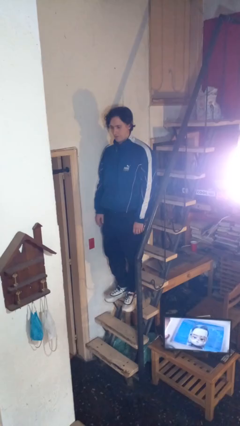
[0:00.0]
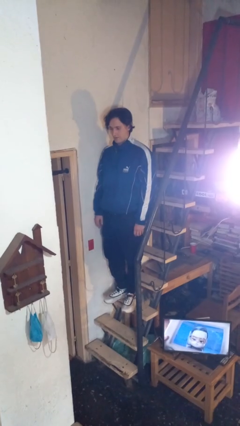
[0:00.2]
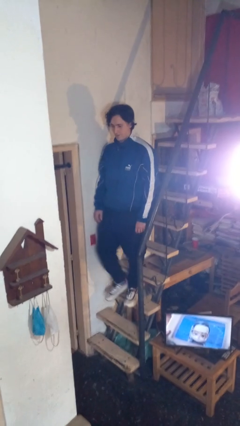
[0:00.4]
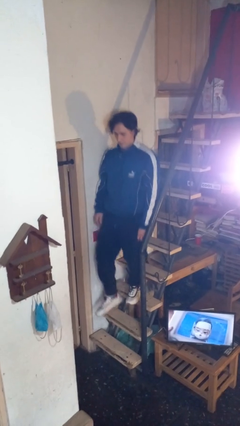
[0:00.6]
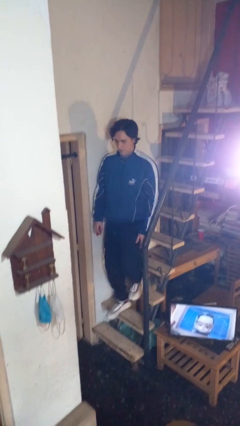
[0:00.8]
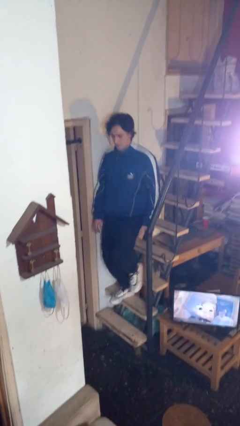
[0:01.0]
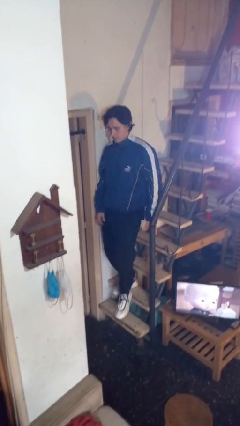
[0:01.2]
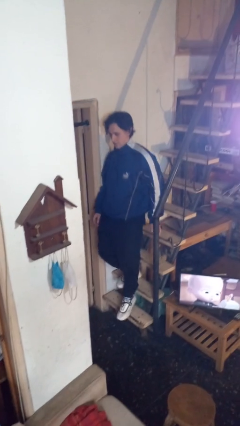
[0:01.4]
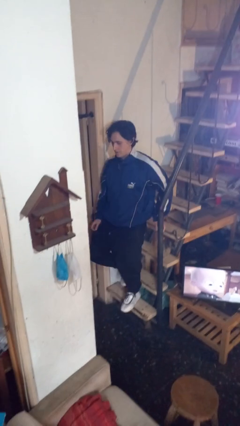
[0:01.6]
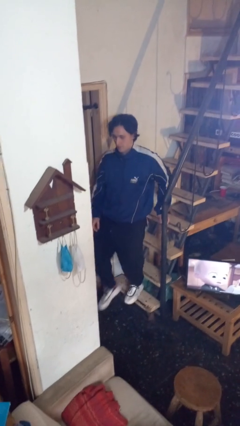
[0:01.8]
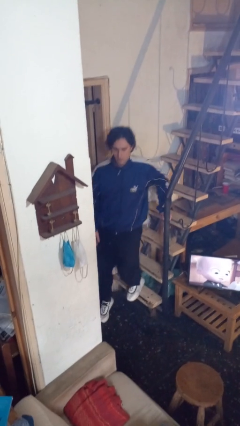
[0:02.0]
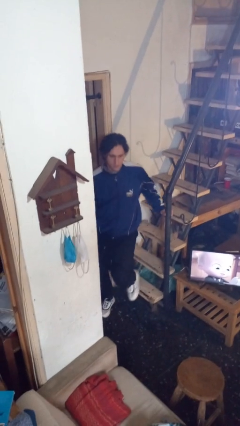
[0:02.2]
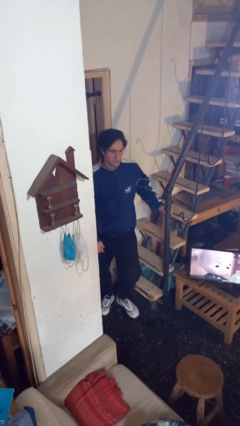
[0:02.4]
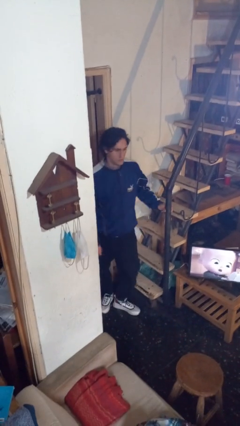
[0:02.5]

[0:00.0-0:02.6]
person climbs down stairs

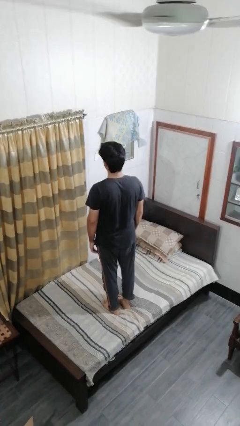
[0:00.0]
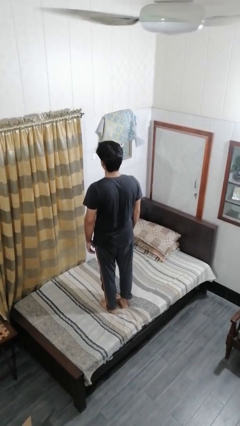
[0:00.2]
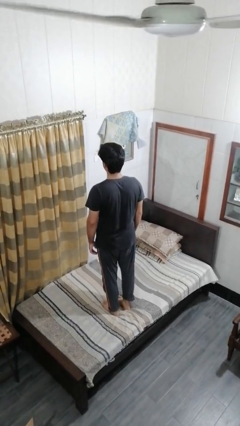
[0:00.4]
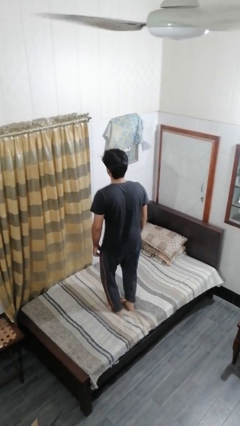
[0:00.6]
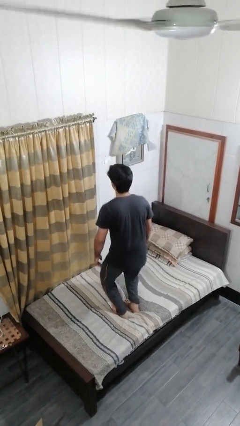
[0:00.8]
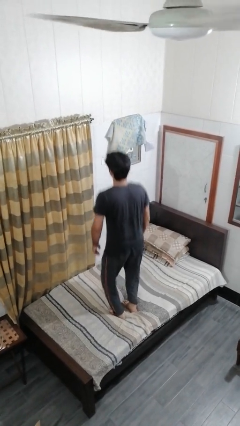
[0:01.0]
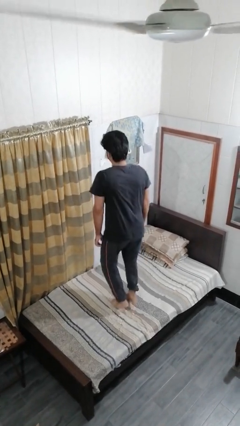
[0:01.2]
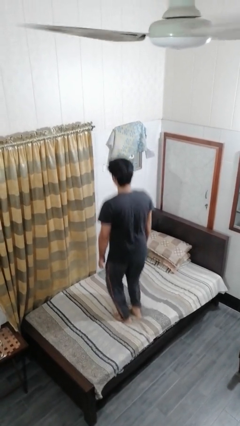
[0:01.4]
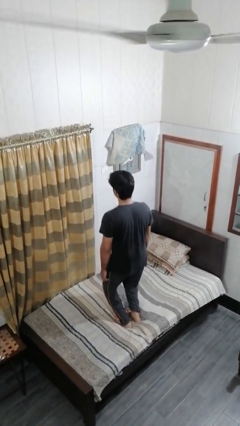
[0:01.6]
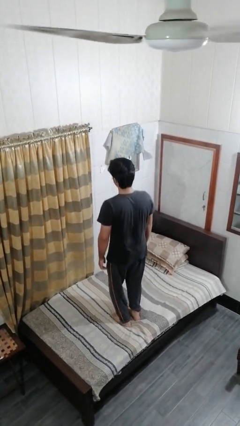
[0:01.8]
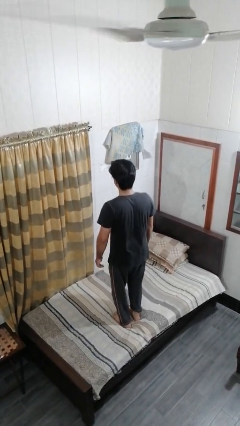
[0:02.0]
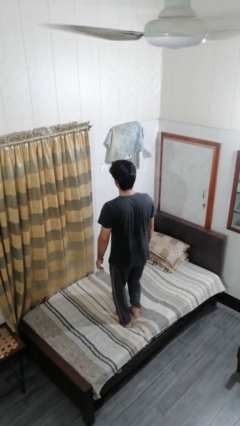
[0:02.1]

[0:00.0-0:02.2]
person jumps on bed

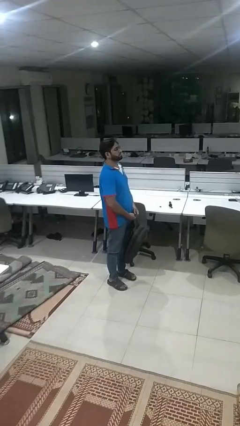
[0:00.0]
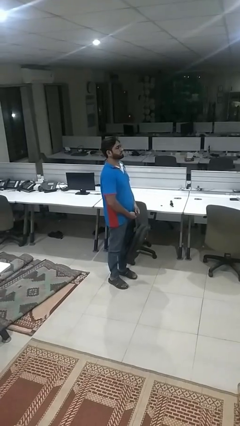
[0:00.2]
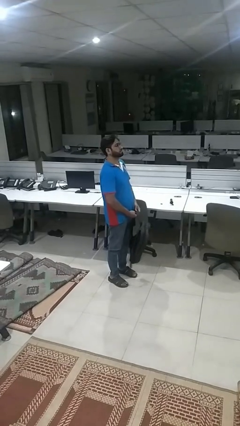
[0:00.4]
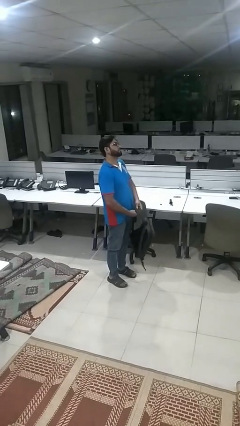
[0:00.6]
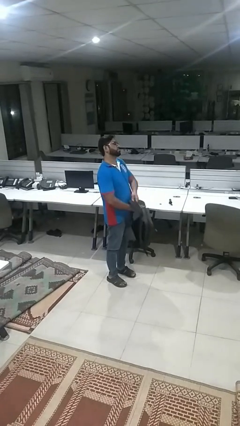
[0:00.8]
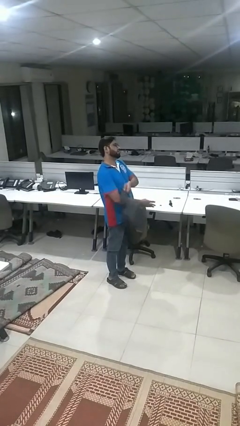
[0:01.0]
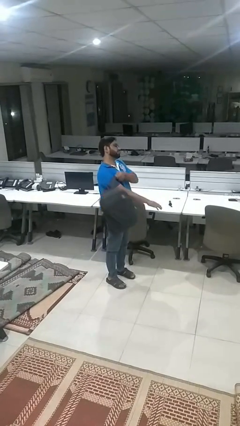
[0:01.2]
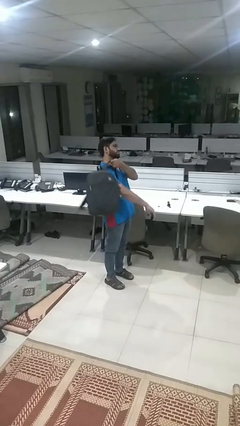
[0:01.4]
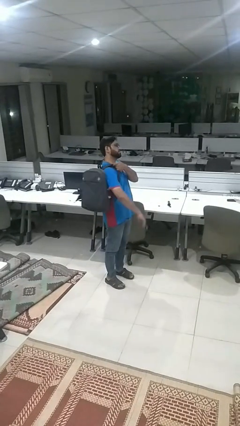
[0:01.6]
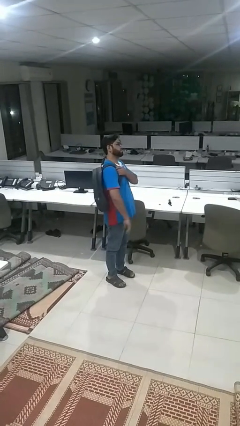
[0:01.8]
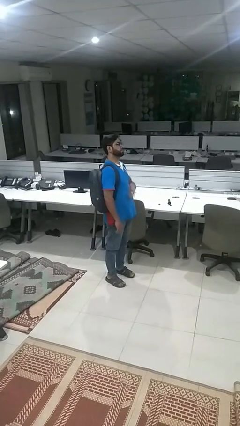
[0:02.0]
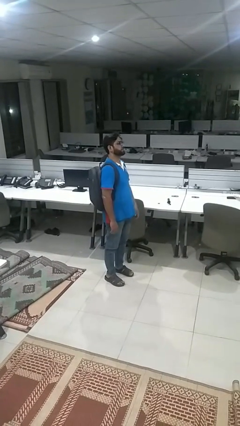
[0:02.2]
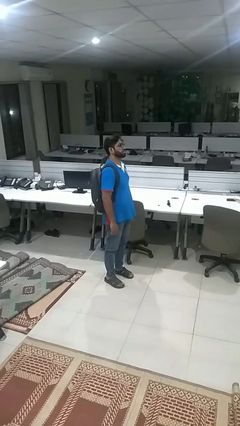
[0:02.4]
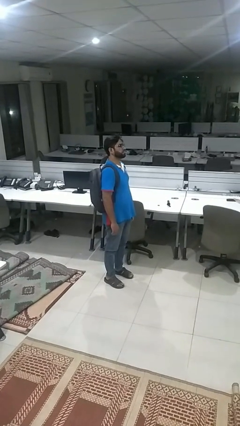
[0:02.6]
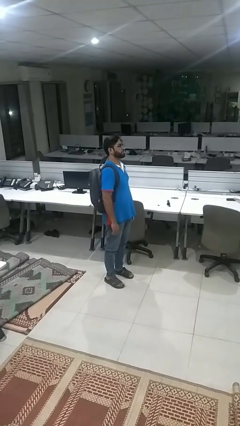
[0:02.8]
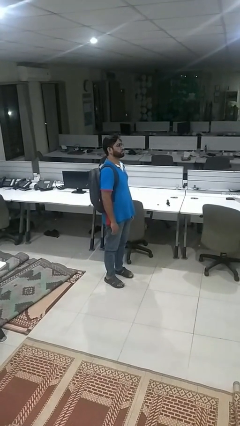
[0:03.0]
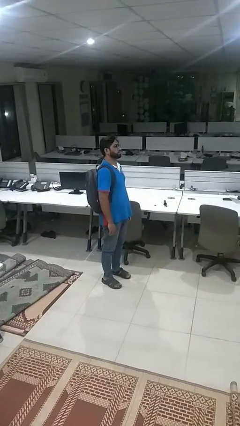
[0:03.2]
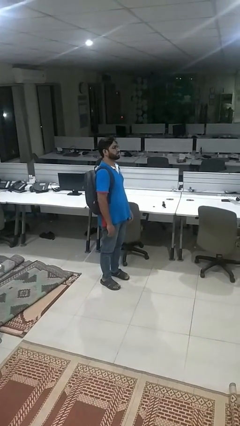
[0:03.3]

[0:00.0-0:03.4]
person puts on backpack

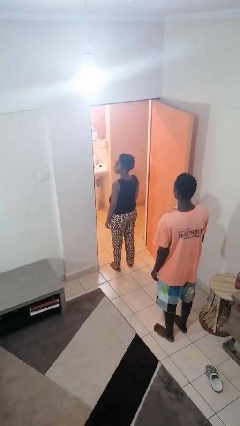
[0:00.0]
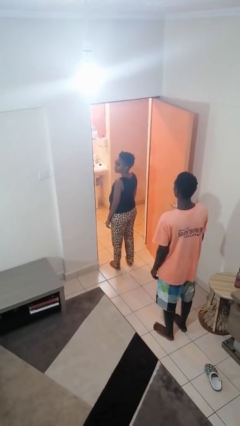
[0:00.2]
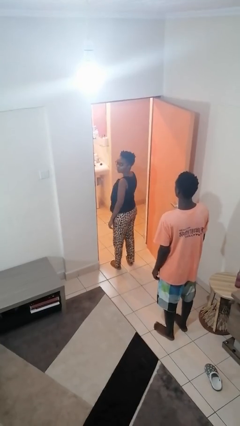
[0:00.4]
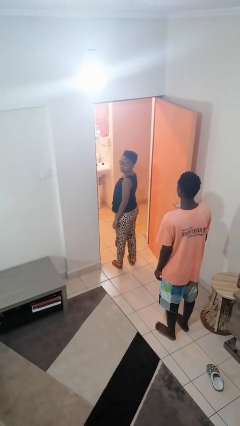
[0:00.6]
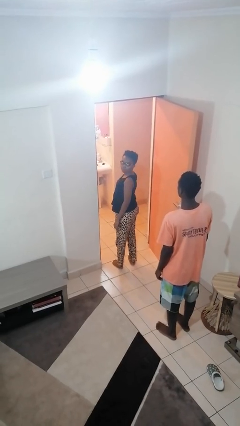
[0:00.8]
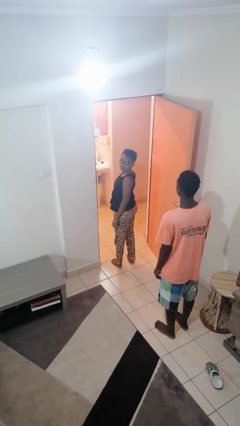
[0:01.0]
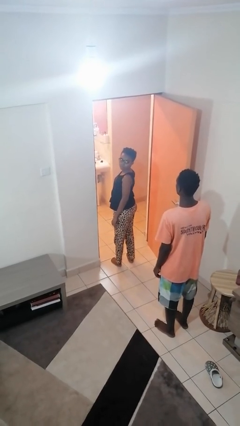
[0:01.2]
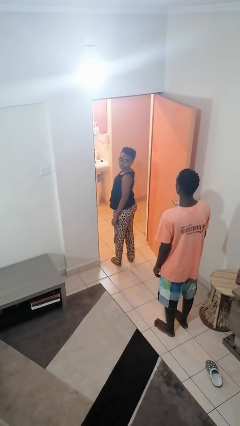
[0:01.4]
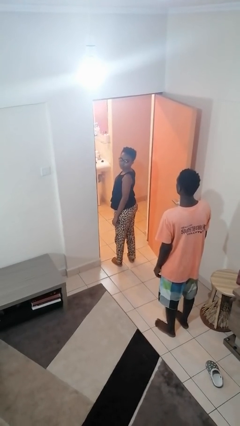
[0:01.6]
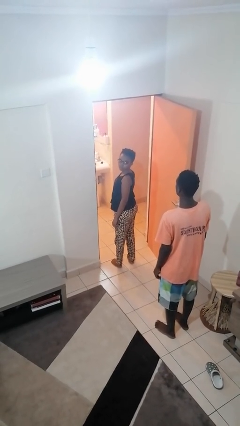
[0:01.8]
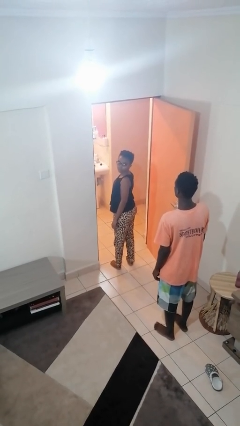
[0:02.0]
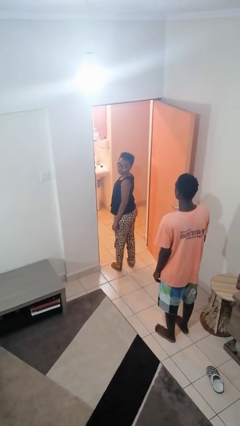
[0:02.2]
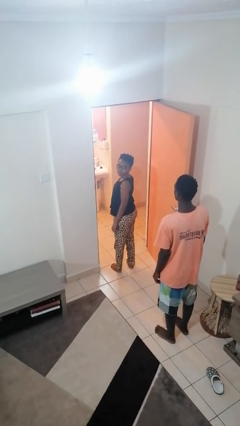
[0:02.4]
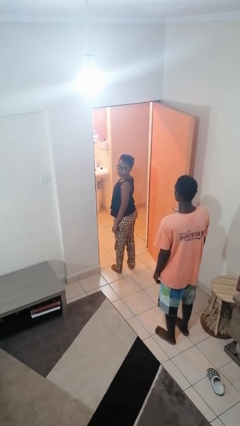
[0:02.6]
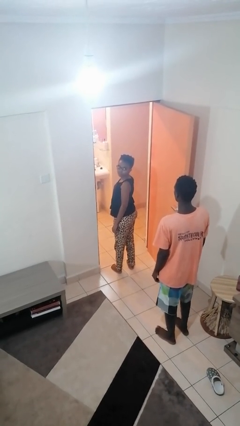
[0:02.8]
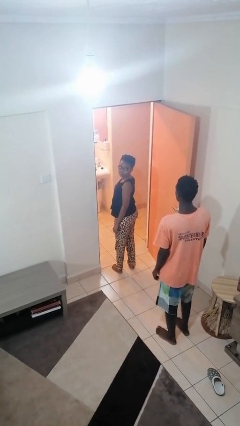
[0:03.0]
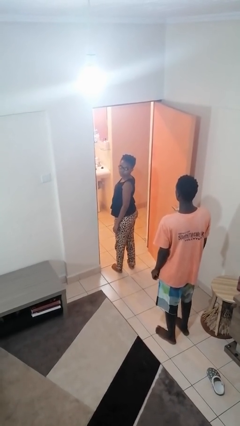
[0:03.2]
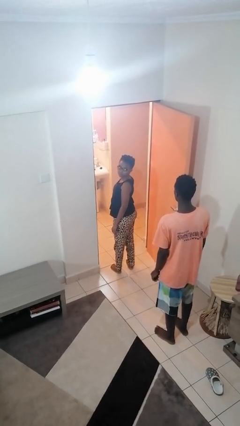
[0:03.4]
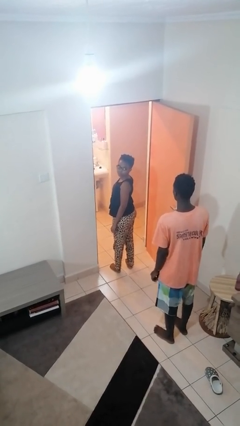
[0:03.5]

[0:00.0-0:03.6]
person looks over shoulder

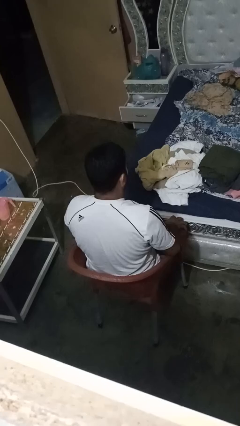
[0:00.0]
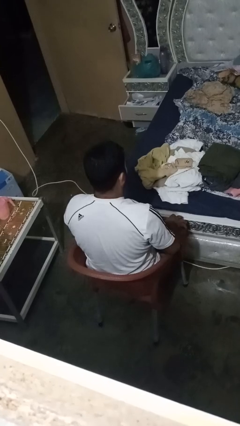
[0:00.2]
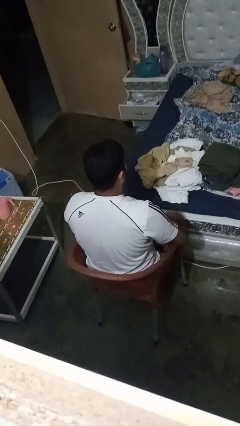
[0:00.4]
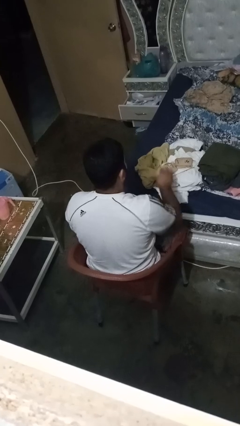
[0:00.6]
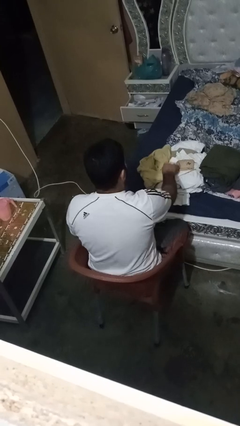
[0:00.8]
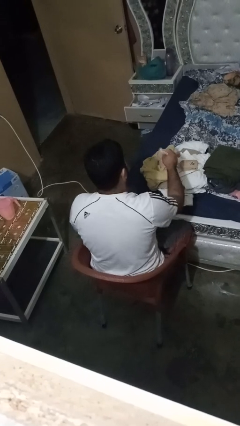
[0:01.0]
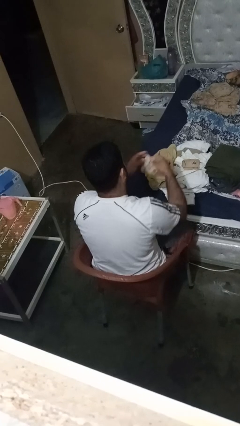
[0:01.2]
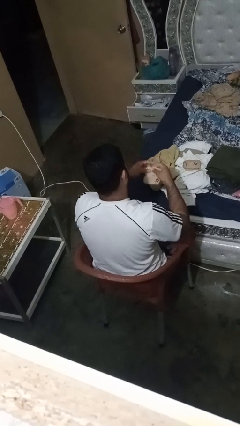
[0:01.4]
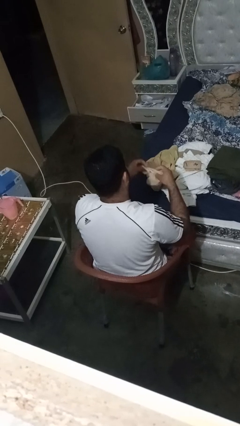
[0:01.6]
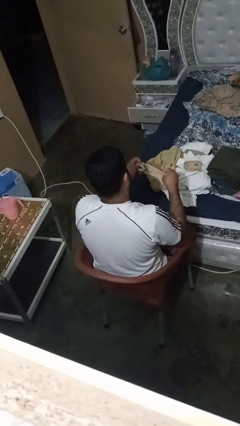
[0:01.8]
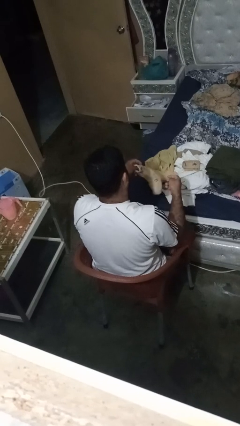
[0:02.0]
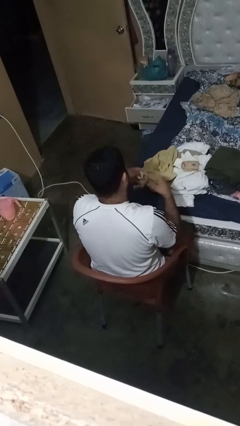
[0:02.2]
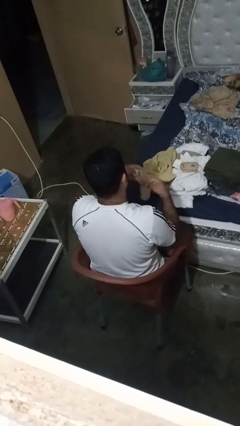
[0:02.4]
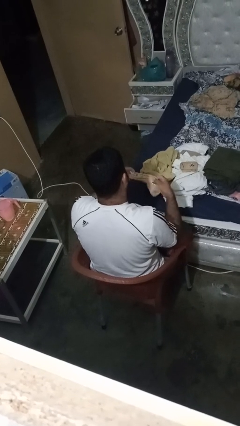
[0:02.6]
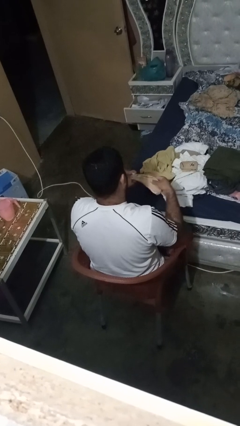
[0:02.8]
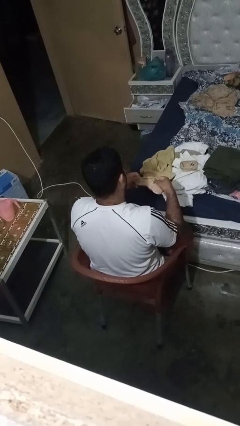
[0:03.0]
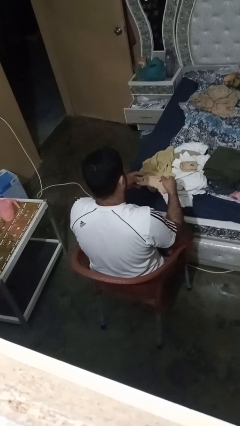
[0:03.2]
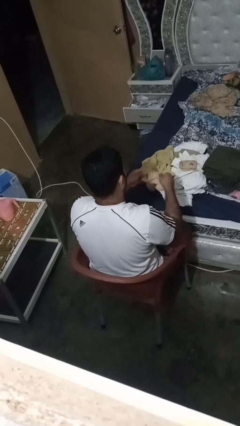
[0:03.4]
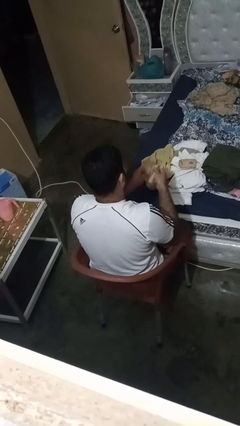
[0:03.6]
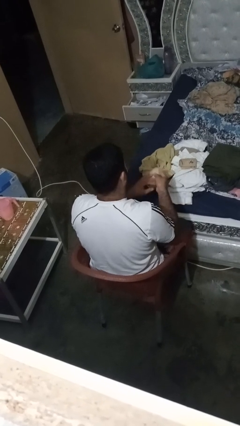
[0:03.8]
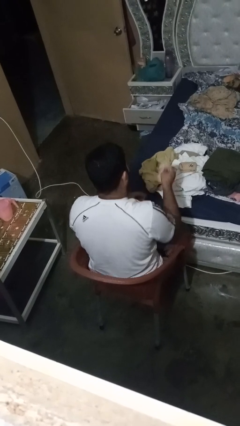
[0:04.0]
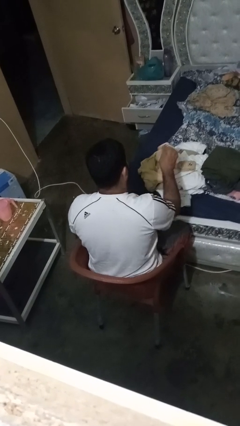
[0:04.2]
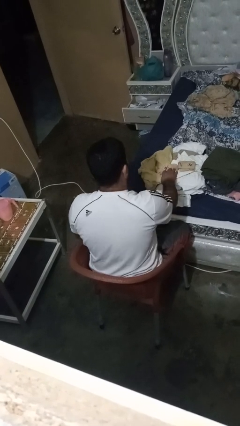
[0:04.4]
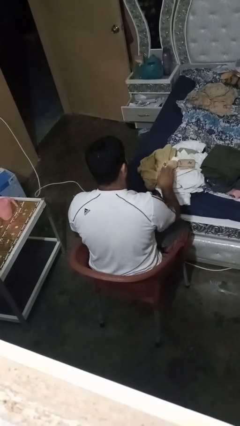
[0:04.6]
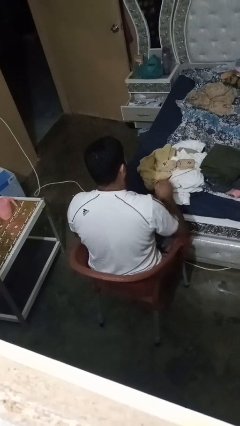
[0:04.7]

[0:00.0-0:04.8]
person folds socks

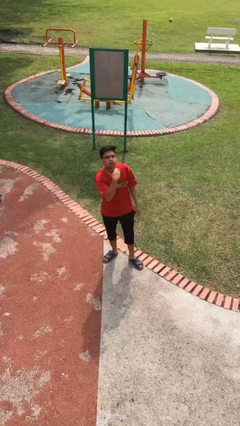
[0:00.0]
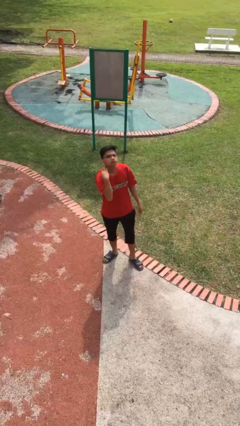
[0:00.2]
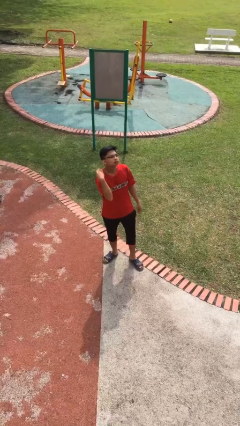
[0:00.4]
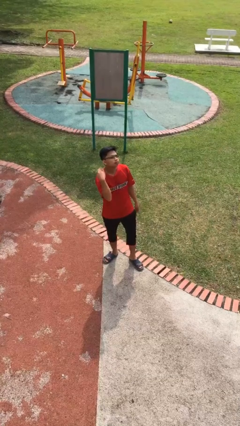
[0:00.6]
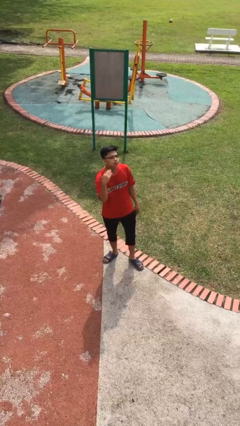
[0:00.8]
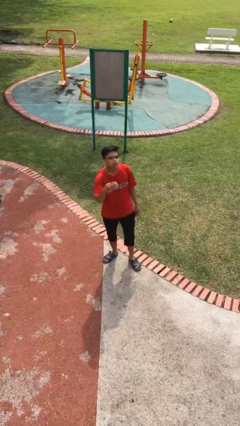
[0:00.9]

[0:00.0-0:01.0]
person gestures cut
